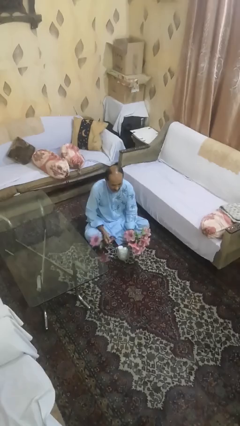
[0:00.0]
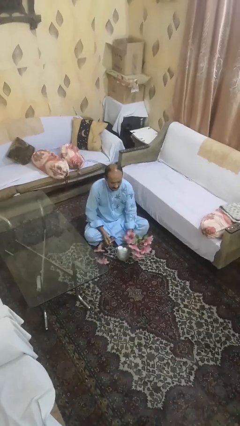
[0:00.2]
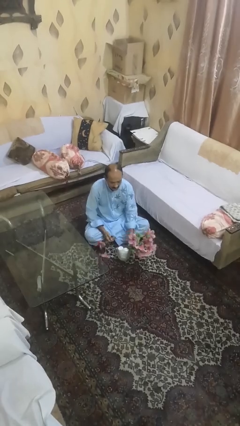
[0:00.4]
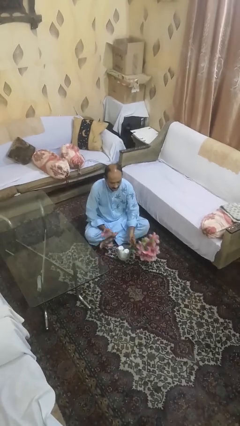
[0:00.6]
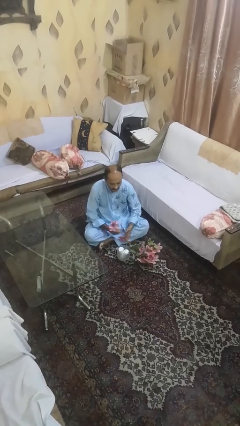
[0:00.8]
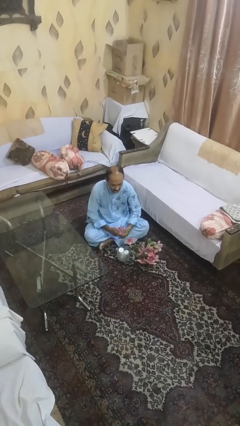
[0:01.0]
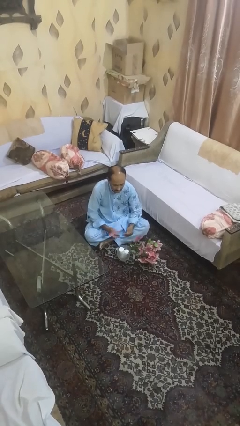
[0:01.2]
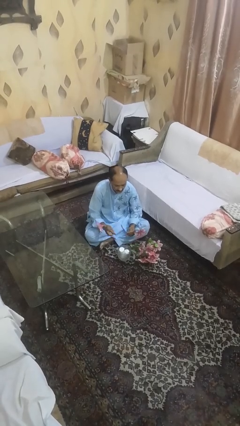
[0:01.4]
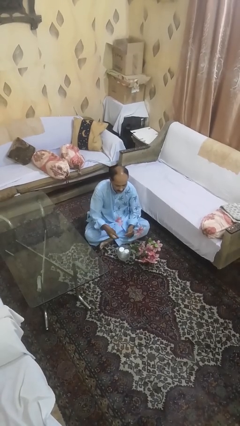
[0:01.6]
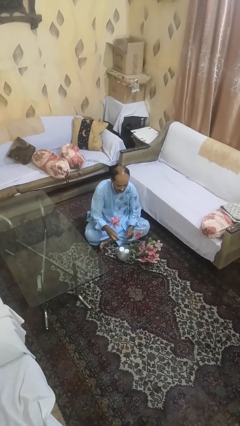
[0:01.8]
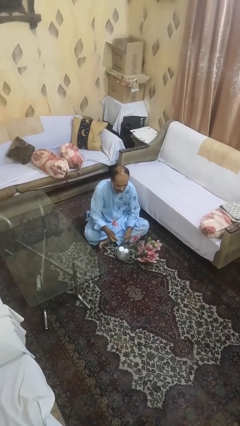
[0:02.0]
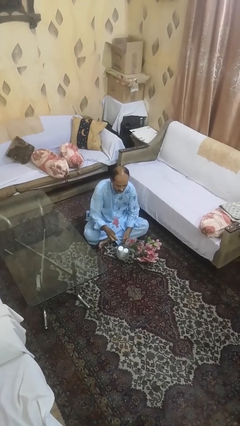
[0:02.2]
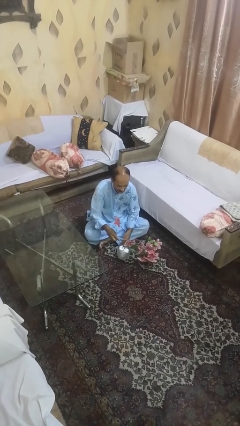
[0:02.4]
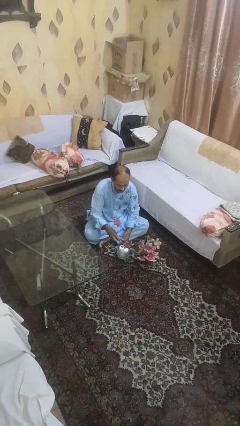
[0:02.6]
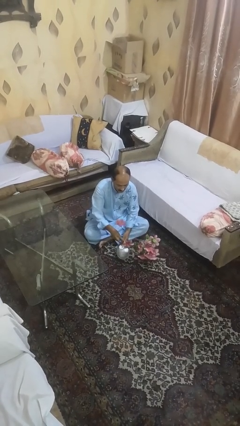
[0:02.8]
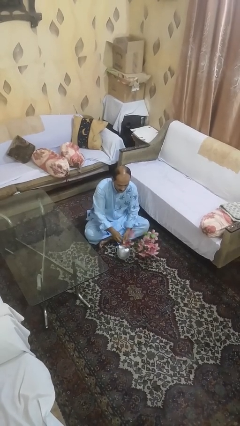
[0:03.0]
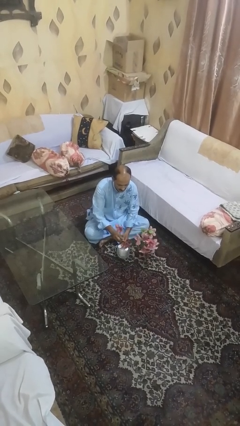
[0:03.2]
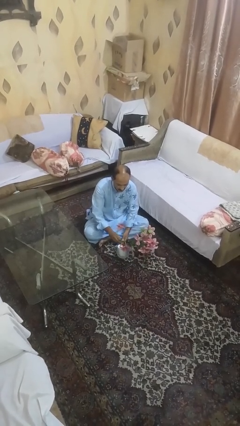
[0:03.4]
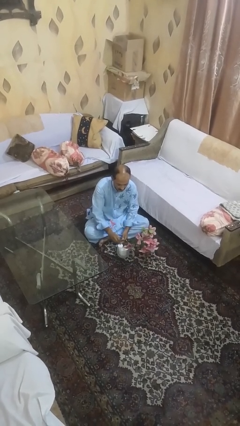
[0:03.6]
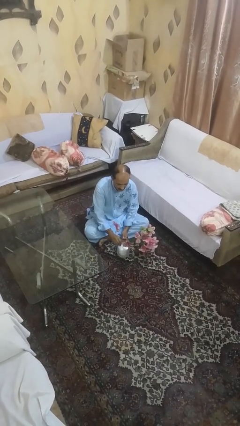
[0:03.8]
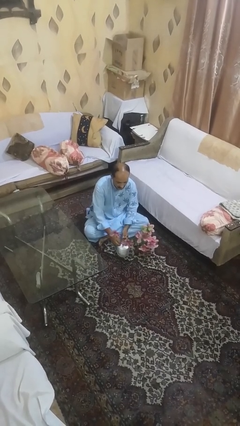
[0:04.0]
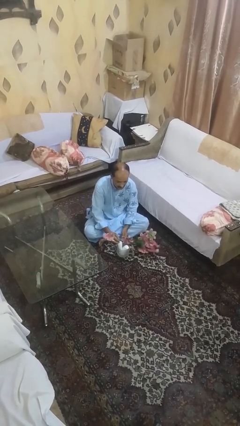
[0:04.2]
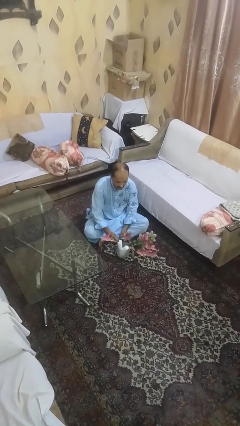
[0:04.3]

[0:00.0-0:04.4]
person arranges flowers in vase

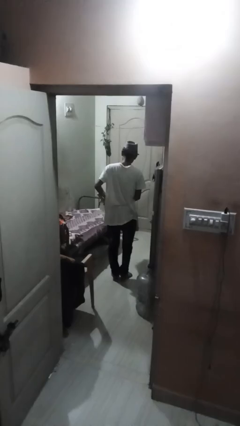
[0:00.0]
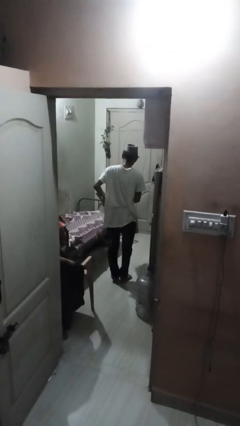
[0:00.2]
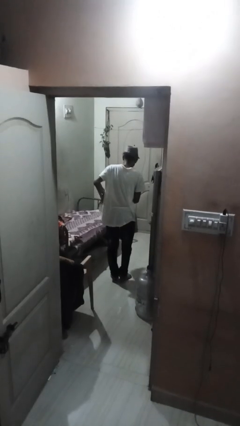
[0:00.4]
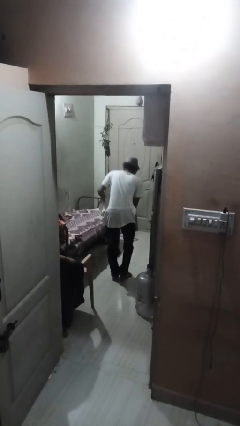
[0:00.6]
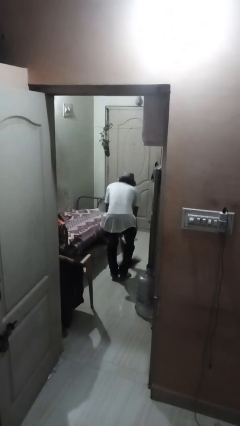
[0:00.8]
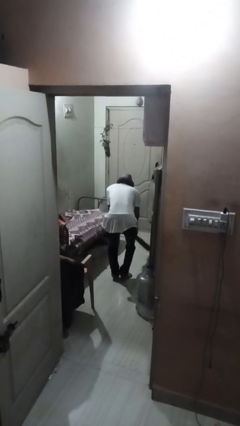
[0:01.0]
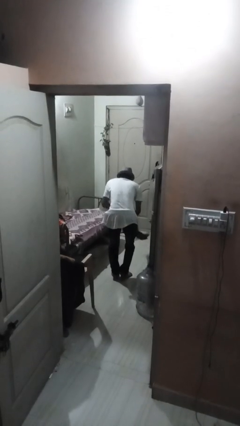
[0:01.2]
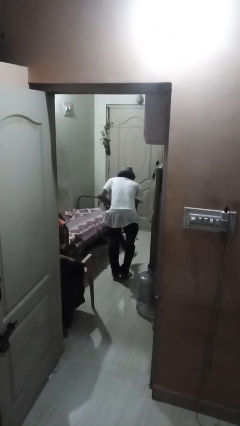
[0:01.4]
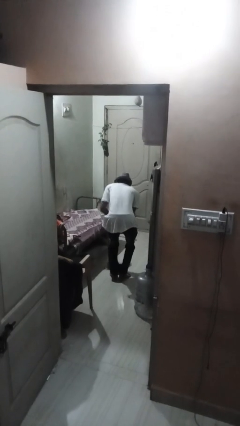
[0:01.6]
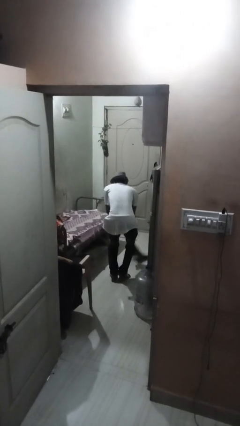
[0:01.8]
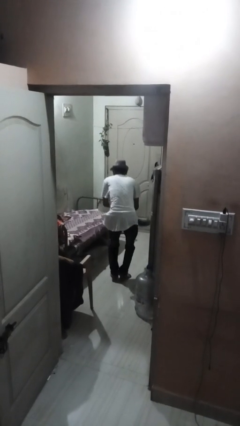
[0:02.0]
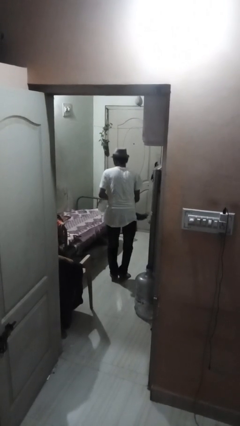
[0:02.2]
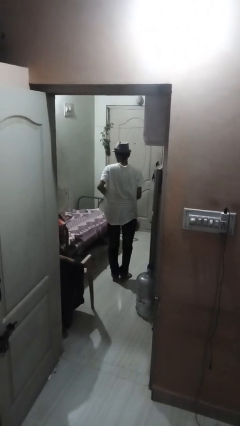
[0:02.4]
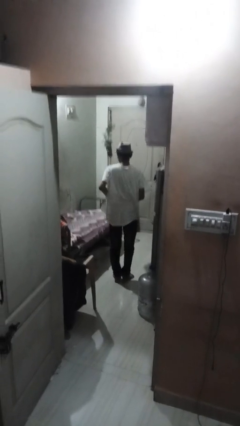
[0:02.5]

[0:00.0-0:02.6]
person mops

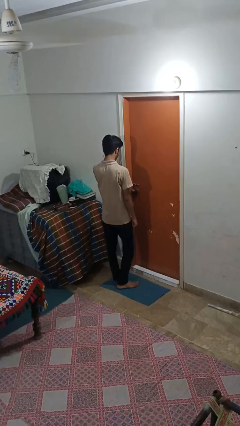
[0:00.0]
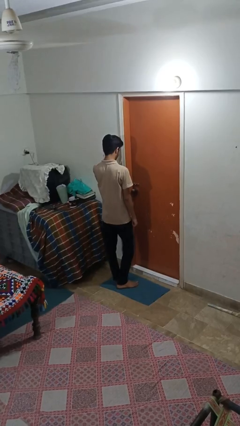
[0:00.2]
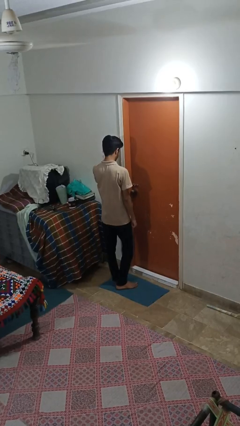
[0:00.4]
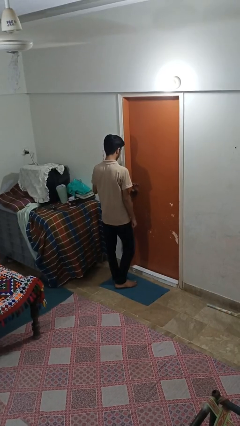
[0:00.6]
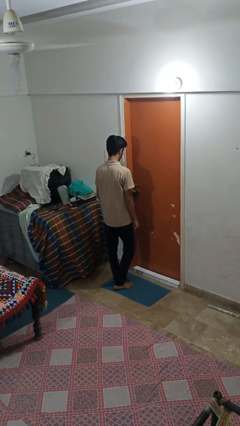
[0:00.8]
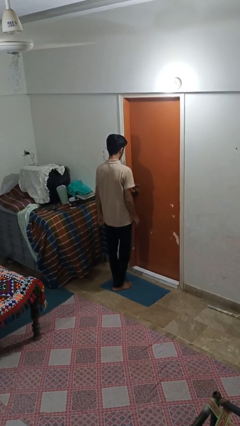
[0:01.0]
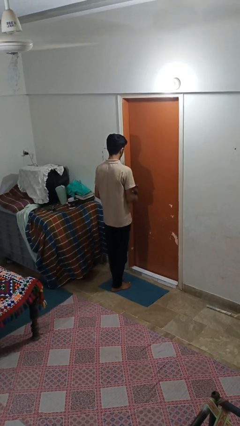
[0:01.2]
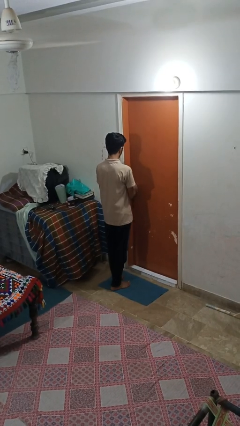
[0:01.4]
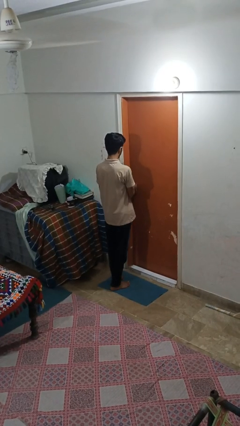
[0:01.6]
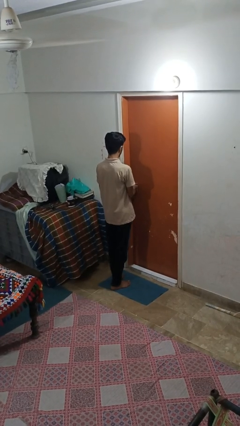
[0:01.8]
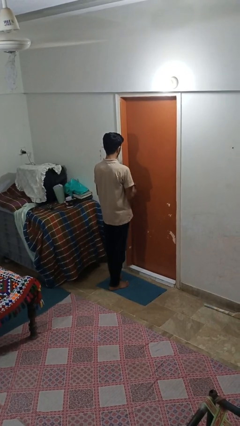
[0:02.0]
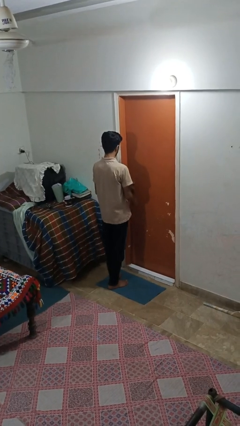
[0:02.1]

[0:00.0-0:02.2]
person unlocks door with keys

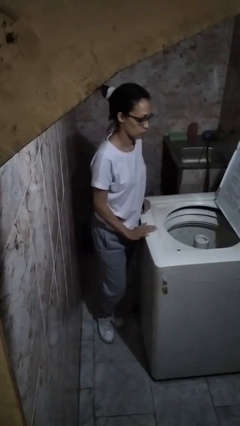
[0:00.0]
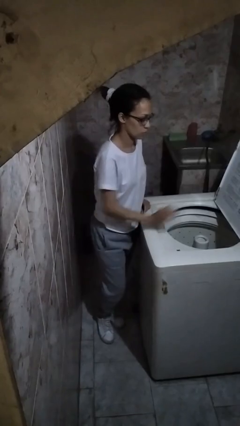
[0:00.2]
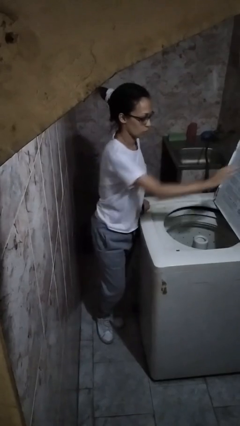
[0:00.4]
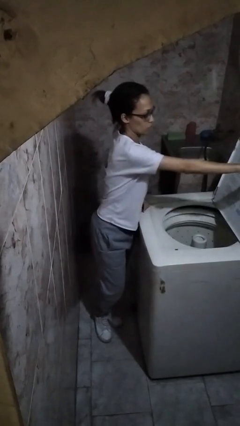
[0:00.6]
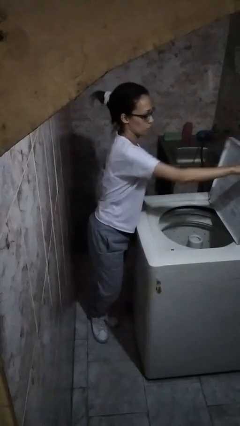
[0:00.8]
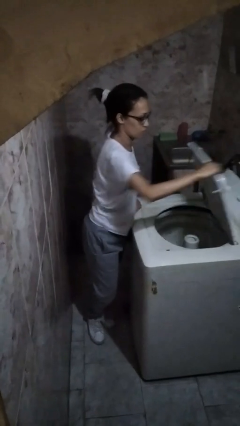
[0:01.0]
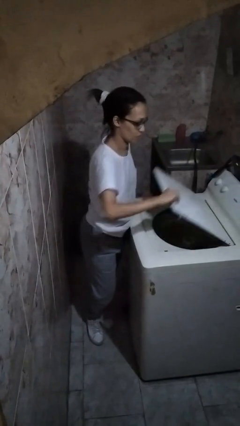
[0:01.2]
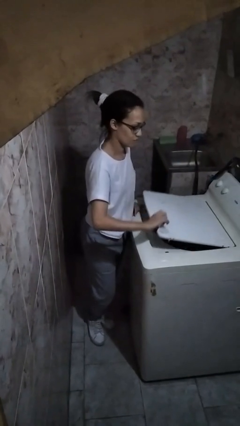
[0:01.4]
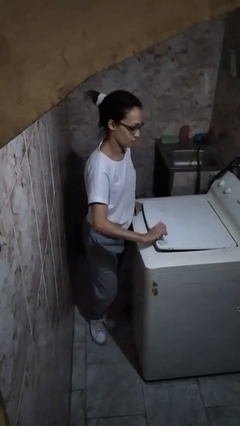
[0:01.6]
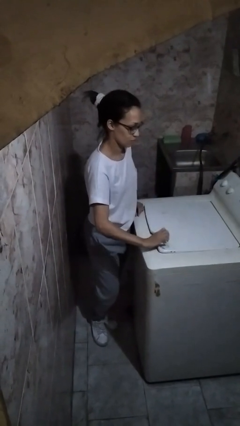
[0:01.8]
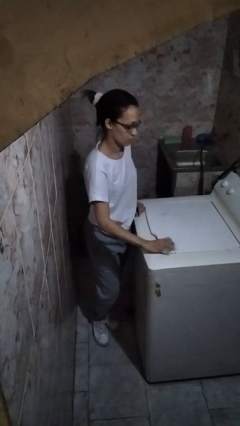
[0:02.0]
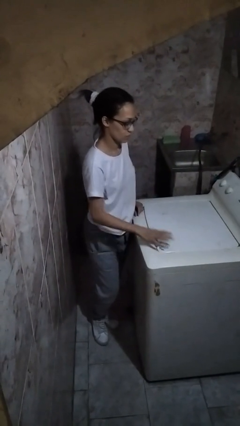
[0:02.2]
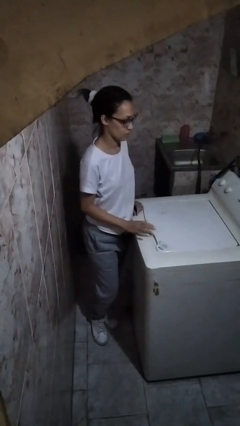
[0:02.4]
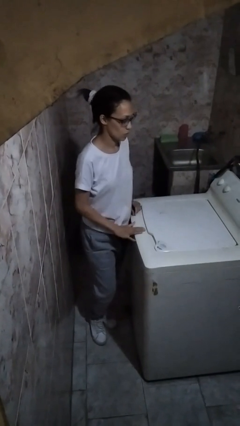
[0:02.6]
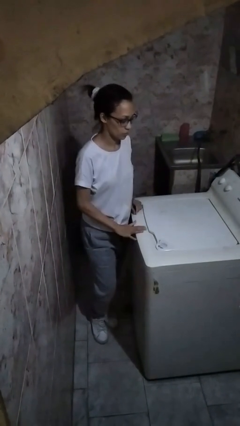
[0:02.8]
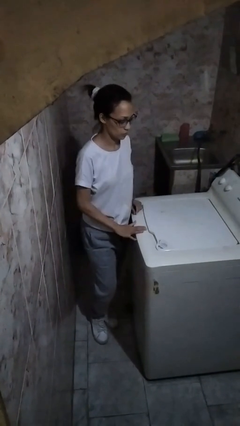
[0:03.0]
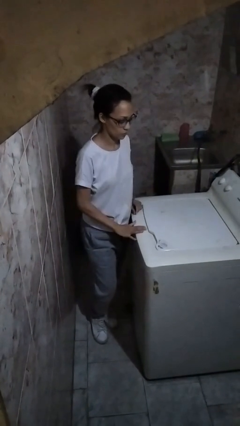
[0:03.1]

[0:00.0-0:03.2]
person closes clothes washer

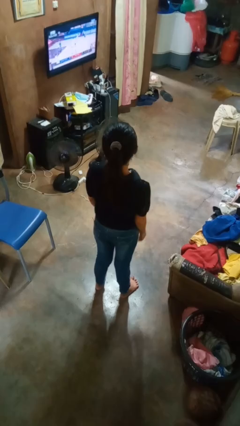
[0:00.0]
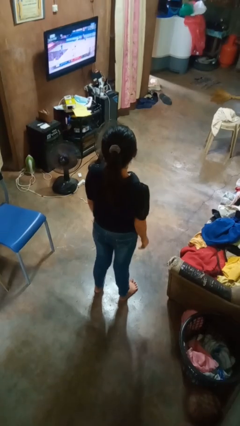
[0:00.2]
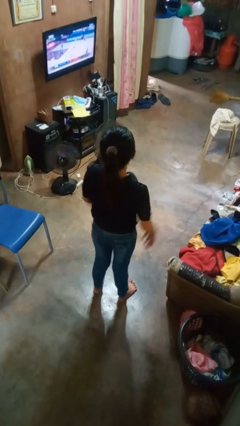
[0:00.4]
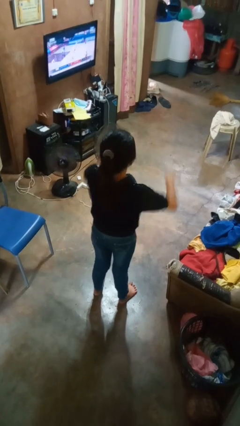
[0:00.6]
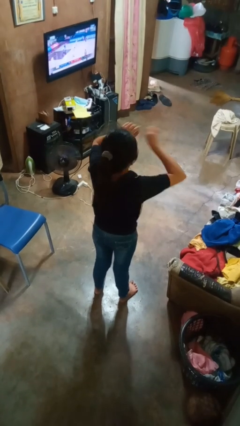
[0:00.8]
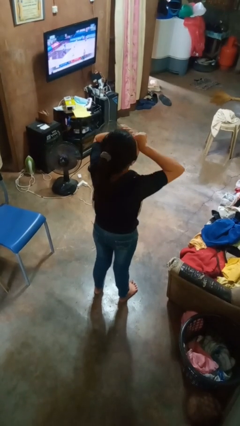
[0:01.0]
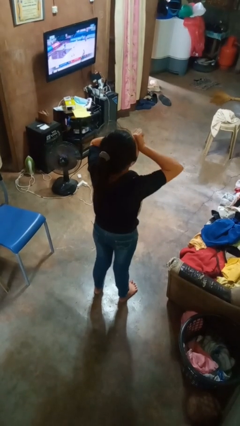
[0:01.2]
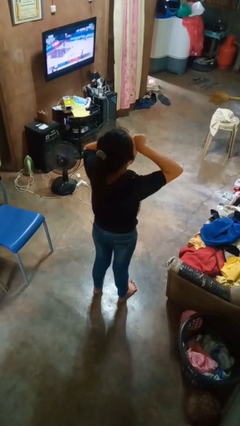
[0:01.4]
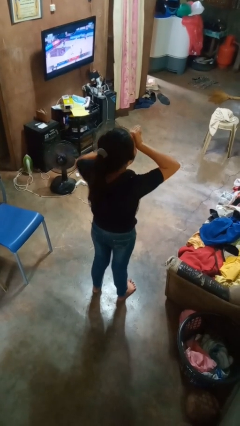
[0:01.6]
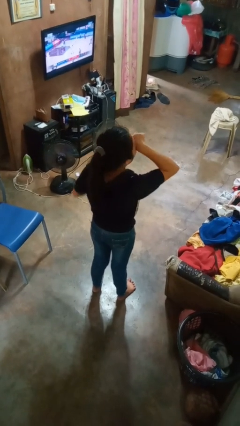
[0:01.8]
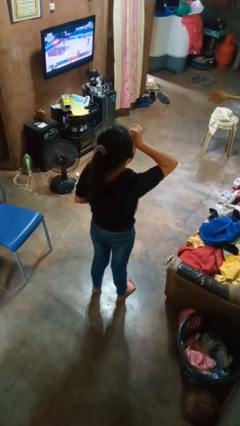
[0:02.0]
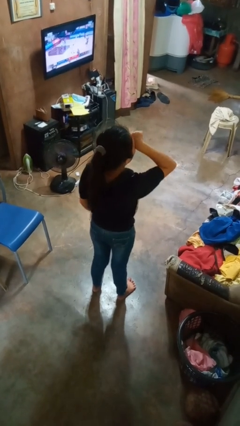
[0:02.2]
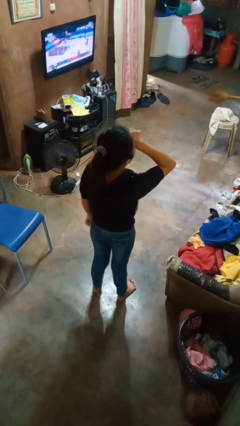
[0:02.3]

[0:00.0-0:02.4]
person rubs eyes

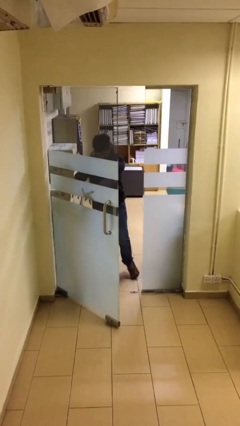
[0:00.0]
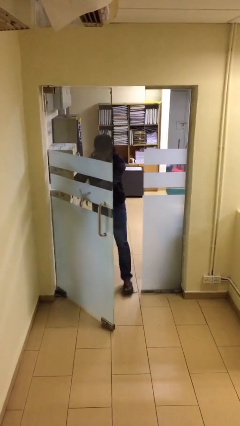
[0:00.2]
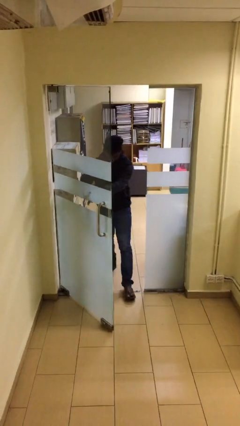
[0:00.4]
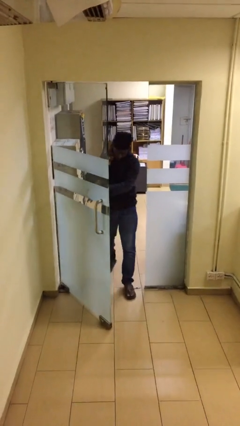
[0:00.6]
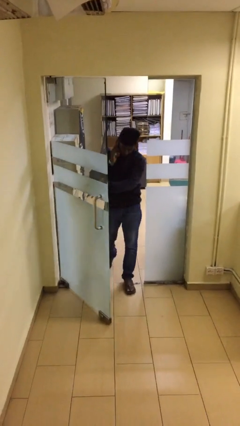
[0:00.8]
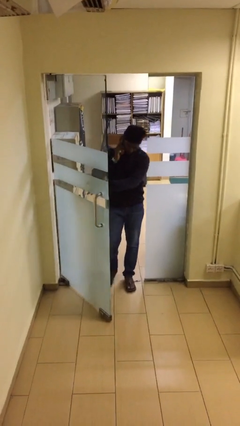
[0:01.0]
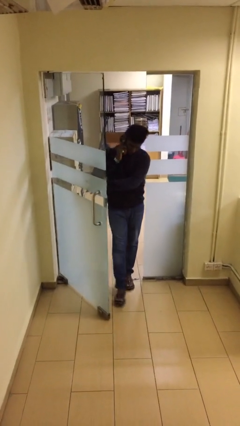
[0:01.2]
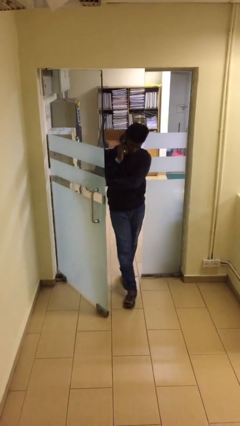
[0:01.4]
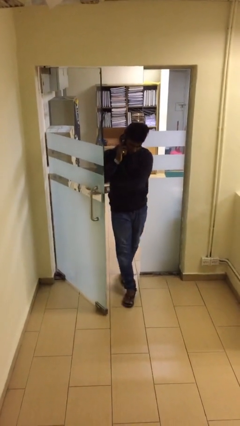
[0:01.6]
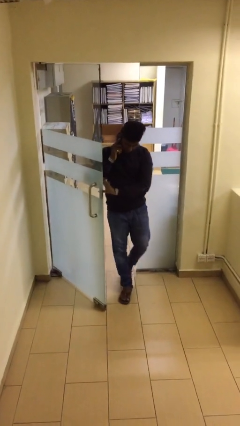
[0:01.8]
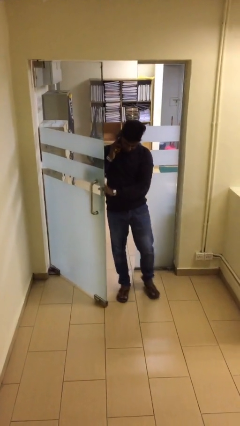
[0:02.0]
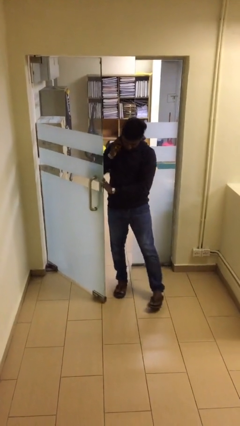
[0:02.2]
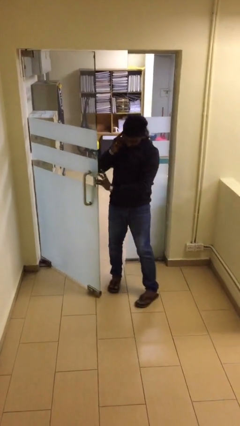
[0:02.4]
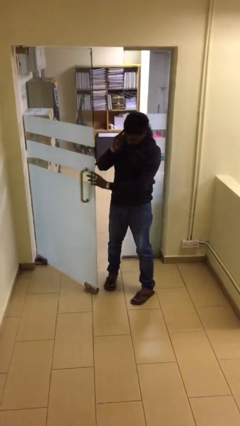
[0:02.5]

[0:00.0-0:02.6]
person enters scene through structure
